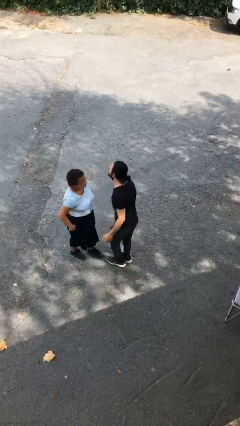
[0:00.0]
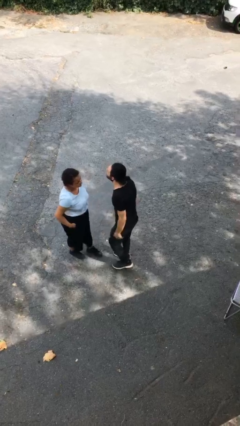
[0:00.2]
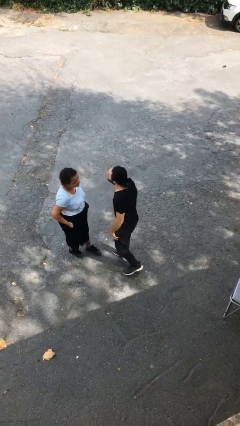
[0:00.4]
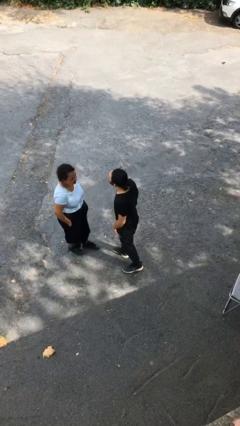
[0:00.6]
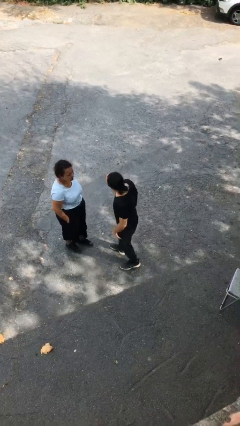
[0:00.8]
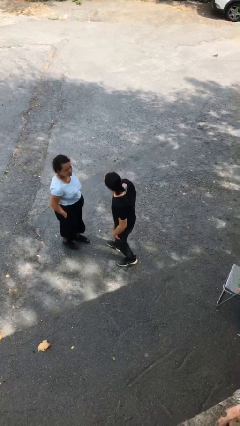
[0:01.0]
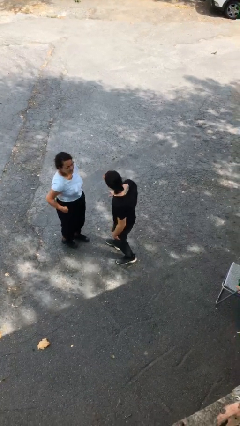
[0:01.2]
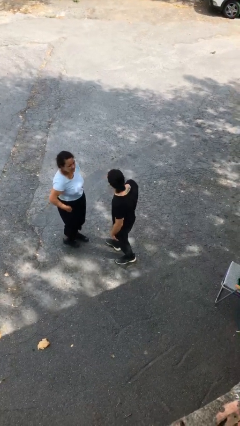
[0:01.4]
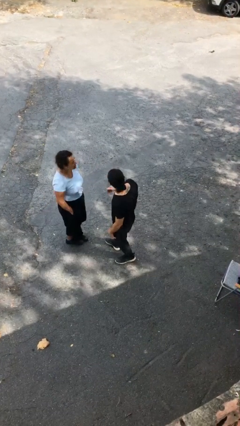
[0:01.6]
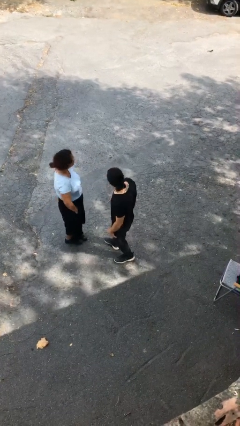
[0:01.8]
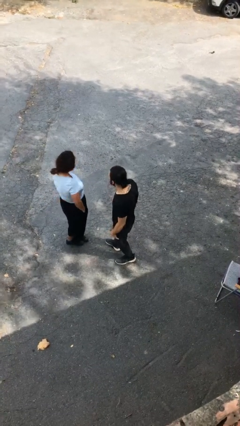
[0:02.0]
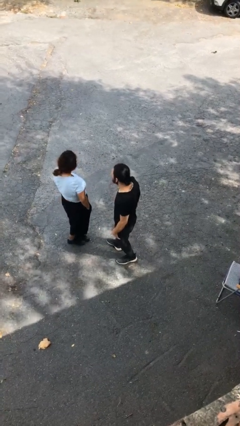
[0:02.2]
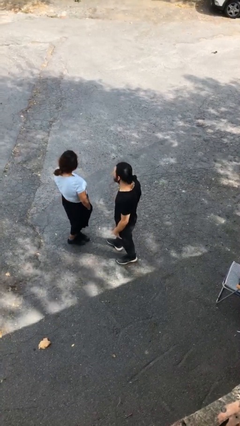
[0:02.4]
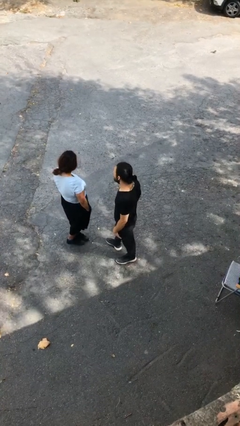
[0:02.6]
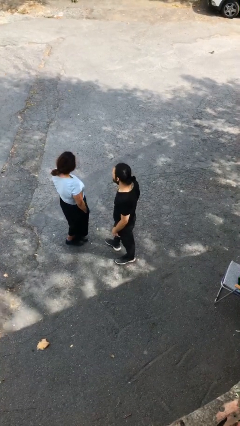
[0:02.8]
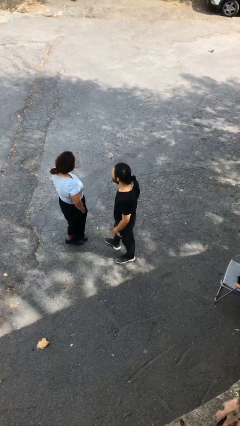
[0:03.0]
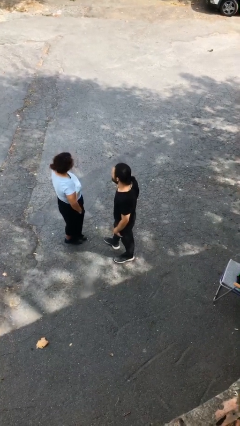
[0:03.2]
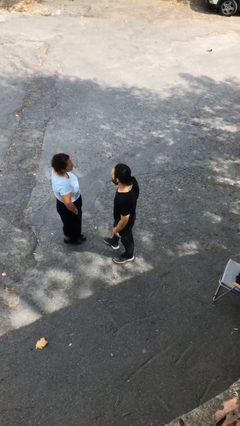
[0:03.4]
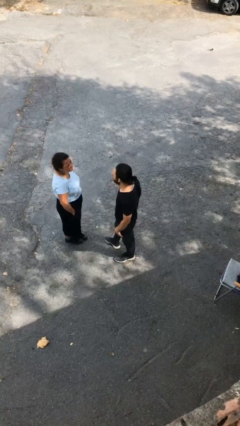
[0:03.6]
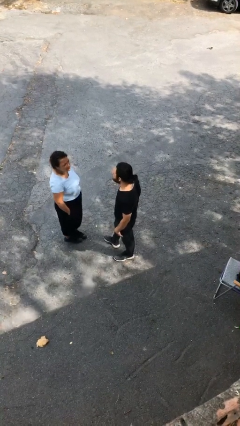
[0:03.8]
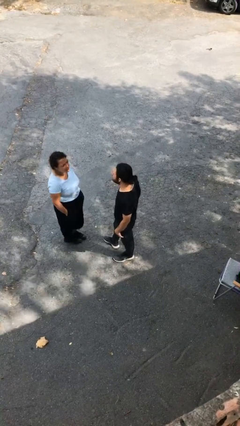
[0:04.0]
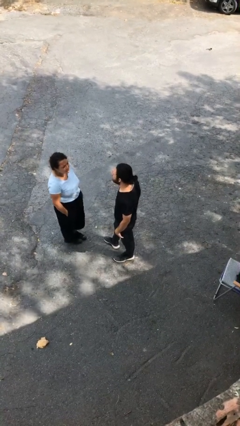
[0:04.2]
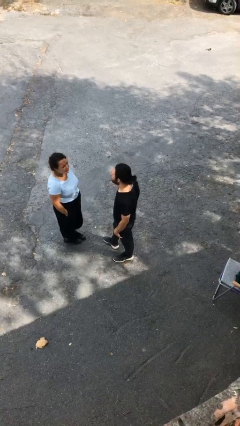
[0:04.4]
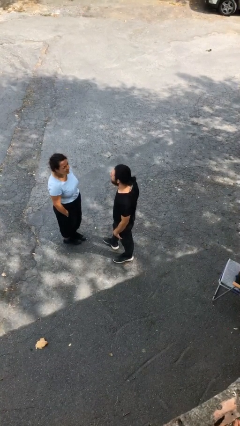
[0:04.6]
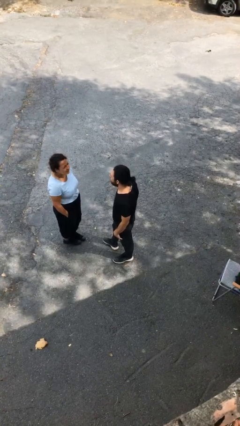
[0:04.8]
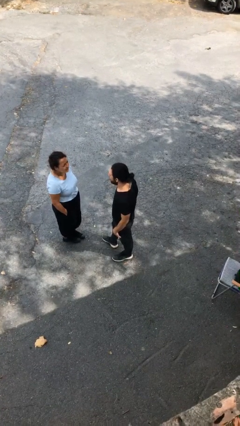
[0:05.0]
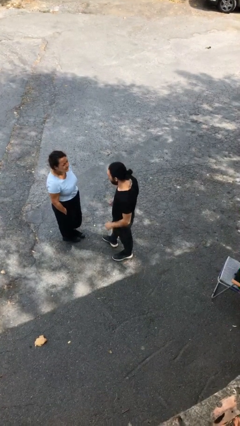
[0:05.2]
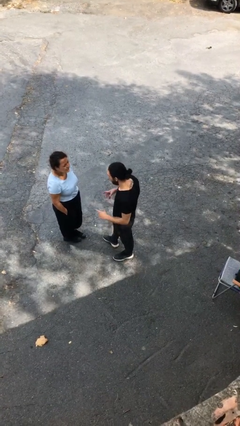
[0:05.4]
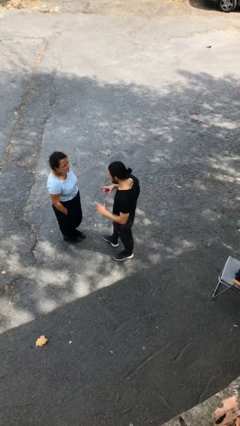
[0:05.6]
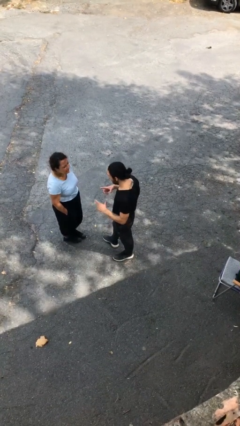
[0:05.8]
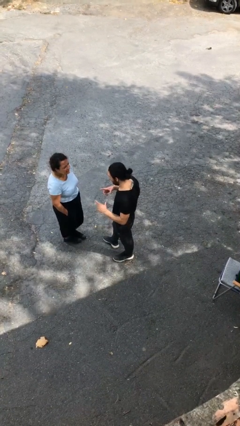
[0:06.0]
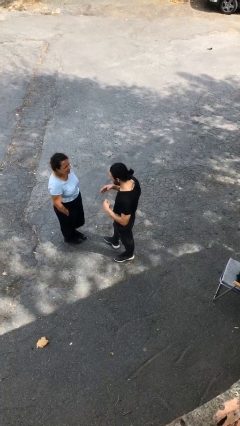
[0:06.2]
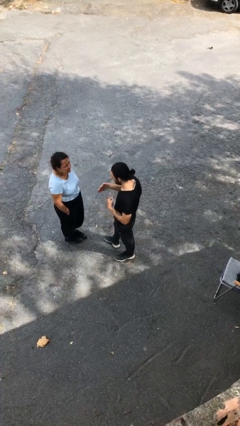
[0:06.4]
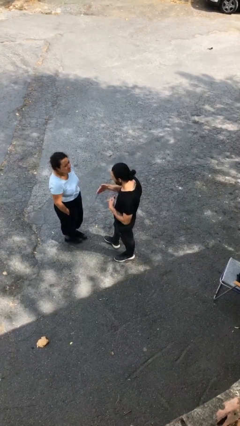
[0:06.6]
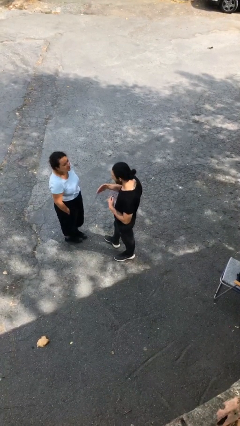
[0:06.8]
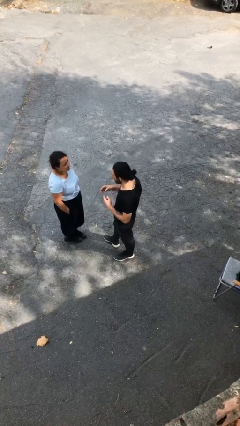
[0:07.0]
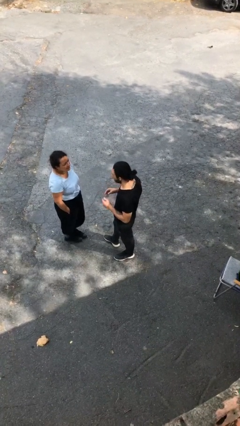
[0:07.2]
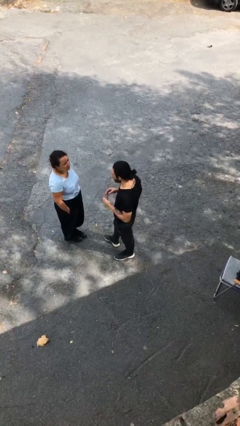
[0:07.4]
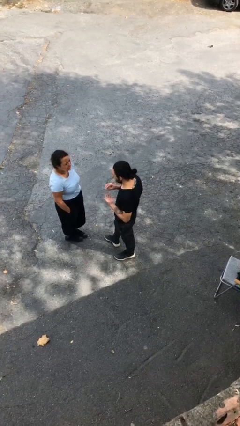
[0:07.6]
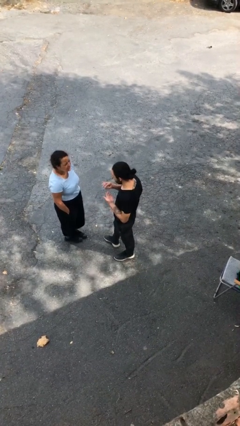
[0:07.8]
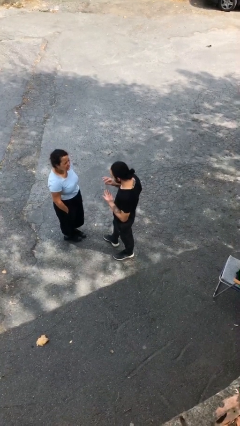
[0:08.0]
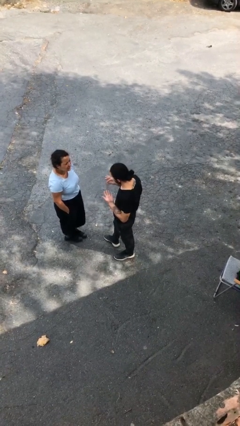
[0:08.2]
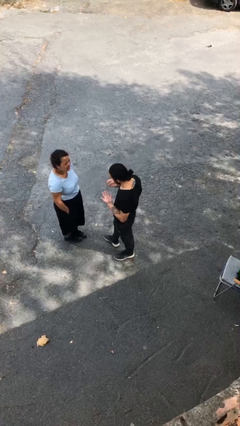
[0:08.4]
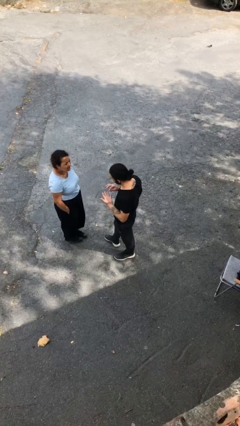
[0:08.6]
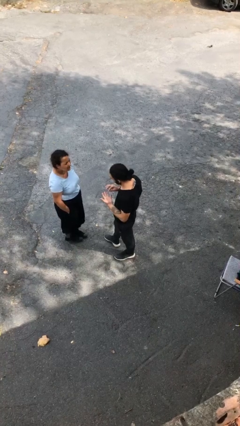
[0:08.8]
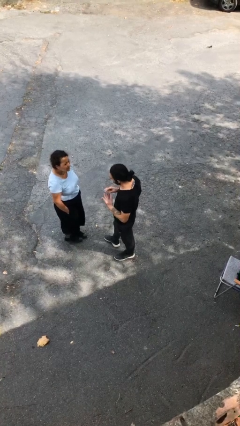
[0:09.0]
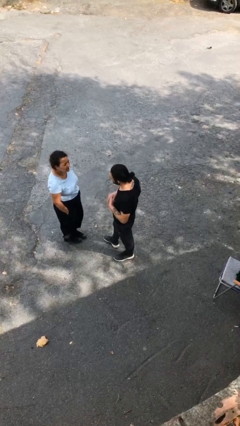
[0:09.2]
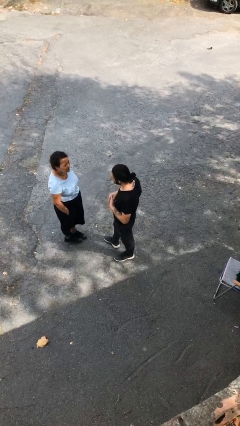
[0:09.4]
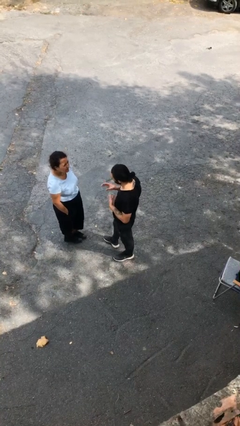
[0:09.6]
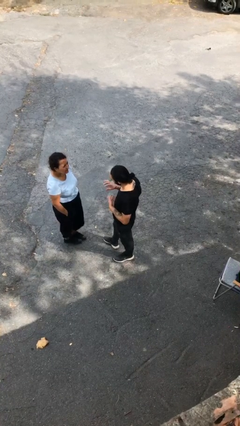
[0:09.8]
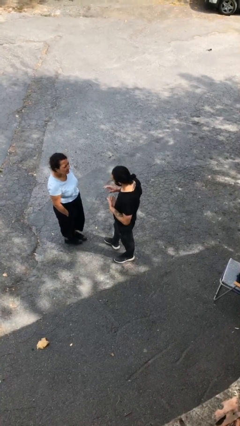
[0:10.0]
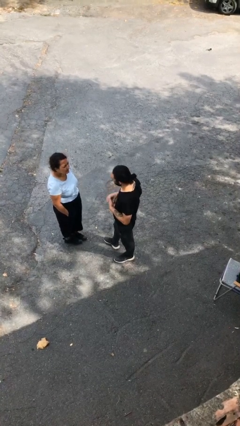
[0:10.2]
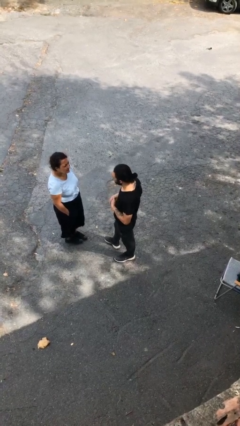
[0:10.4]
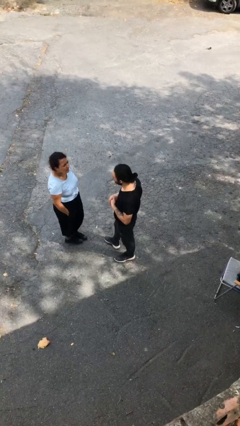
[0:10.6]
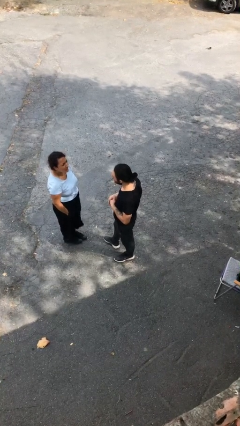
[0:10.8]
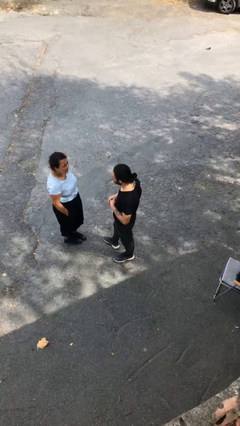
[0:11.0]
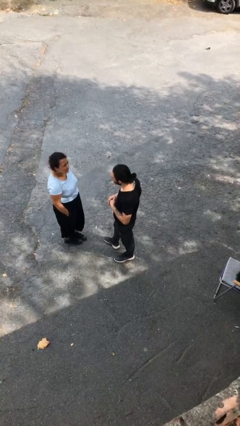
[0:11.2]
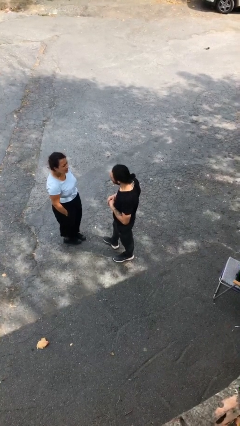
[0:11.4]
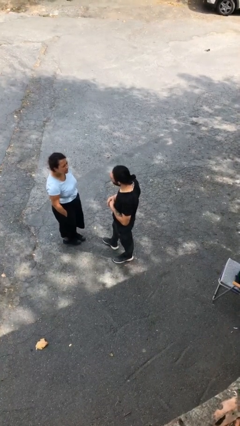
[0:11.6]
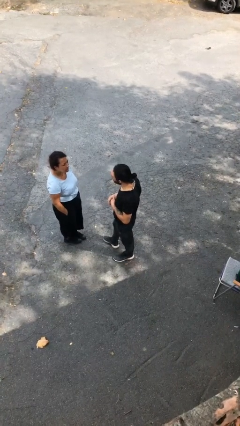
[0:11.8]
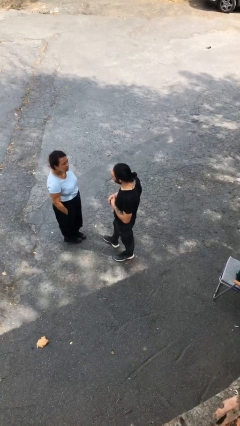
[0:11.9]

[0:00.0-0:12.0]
person talks to person

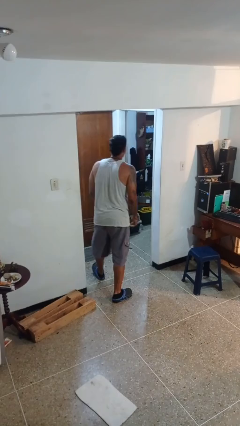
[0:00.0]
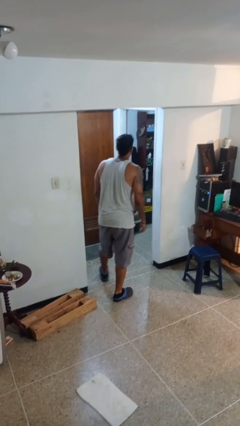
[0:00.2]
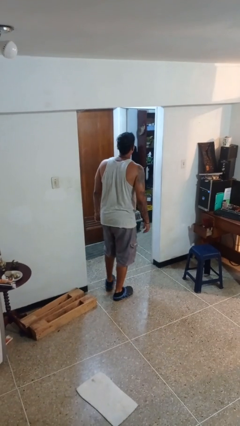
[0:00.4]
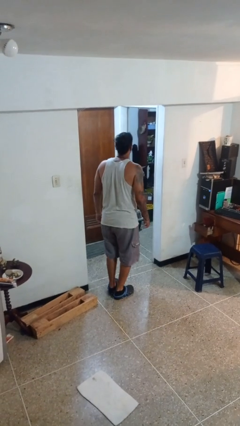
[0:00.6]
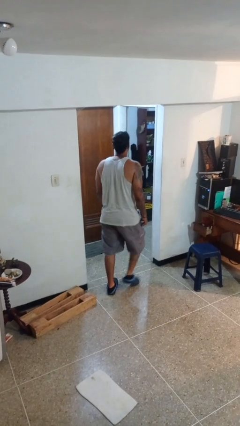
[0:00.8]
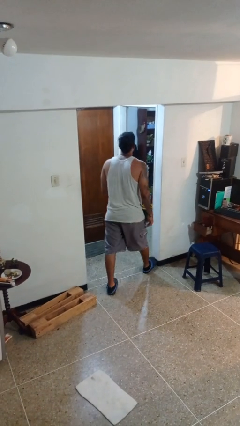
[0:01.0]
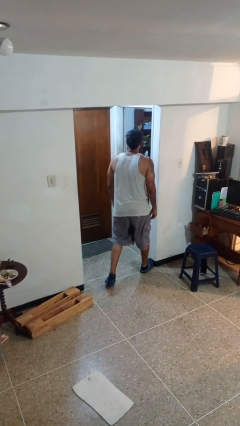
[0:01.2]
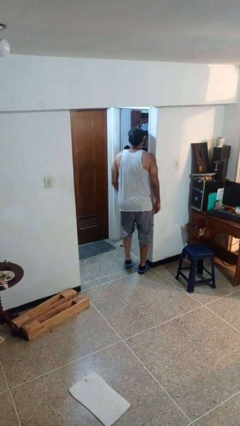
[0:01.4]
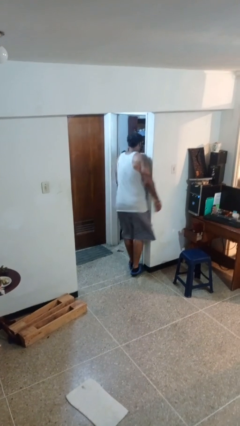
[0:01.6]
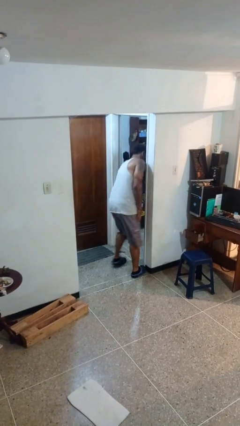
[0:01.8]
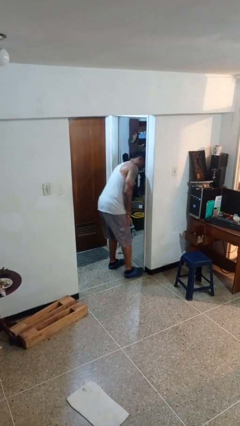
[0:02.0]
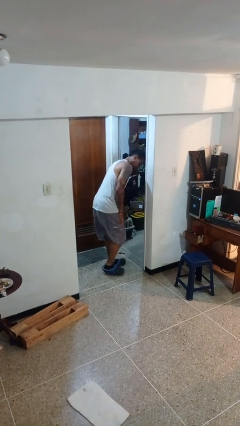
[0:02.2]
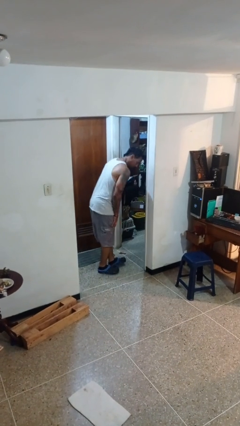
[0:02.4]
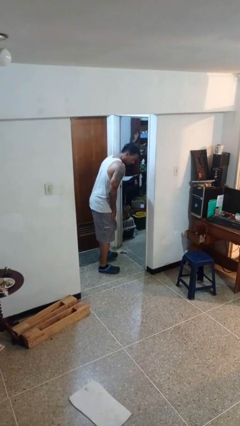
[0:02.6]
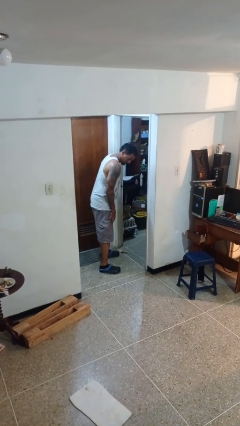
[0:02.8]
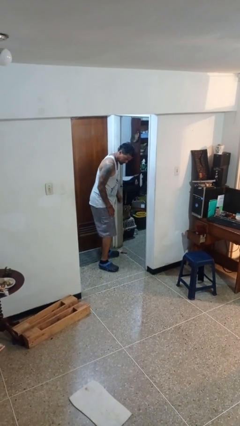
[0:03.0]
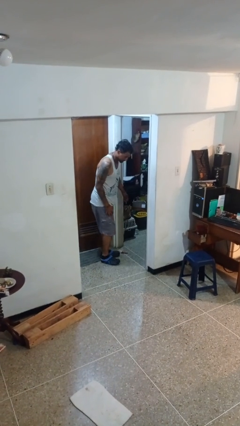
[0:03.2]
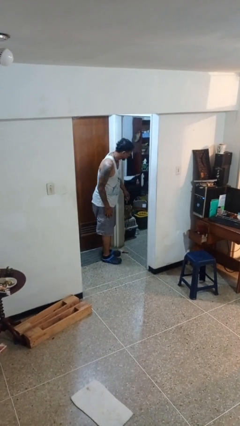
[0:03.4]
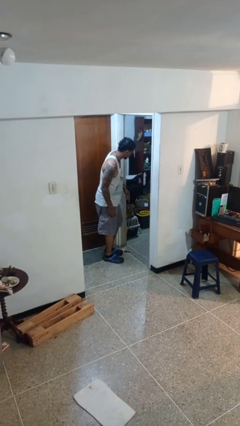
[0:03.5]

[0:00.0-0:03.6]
person bumps into wall

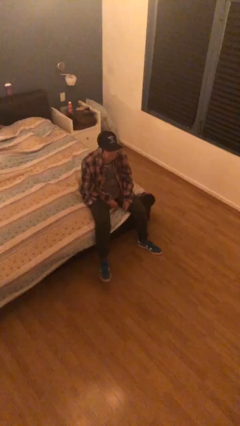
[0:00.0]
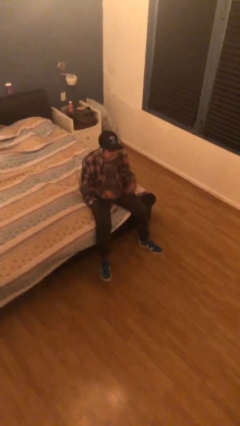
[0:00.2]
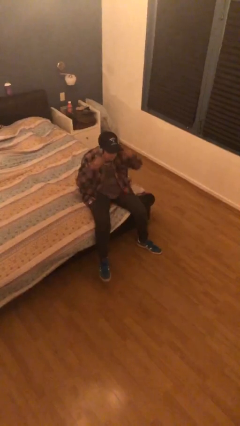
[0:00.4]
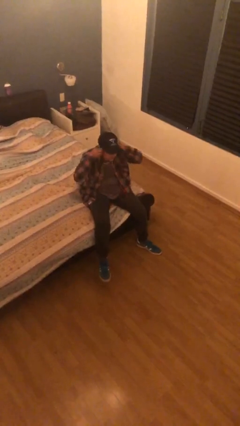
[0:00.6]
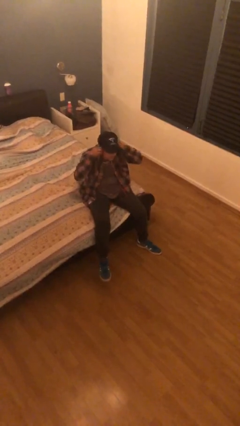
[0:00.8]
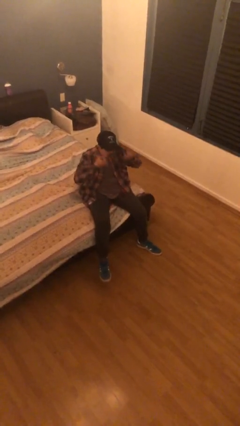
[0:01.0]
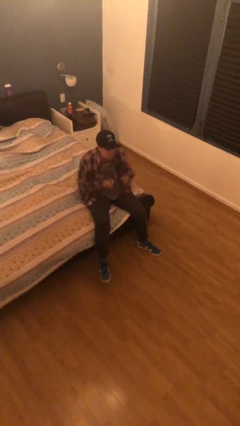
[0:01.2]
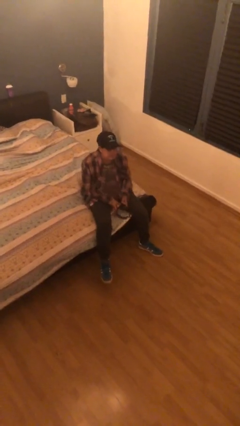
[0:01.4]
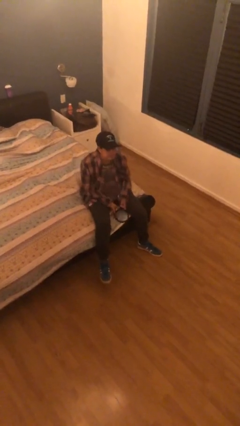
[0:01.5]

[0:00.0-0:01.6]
person takes off headphones
